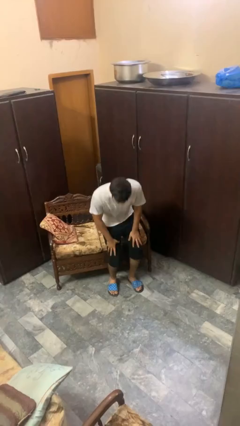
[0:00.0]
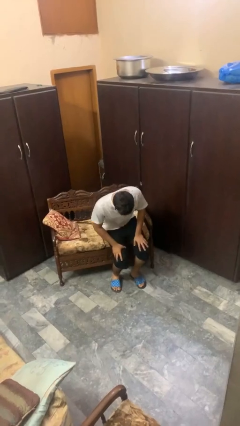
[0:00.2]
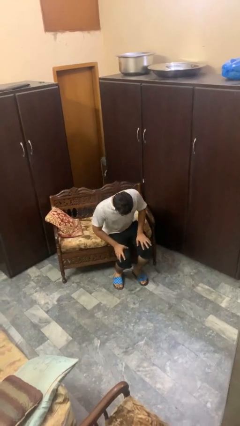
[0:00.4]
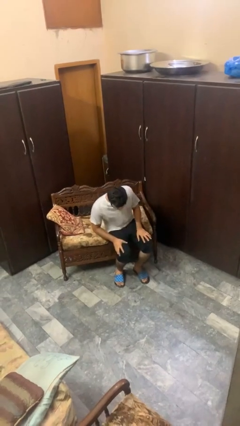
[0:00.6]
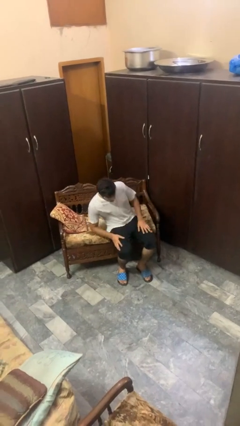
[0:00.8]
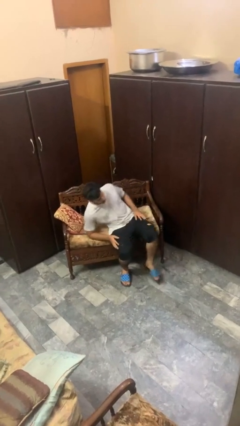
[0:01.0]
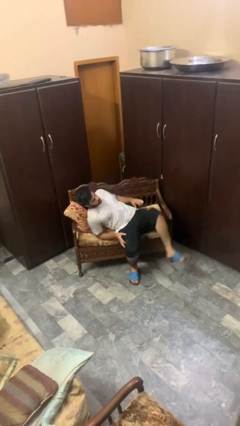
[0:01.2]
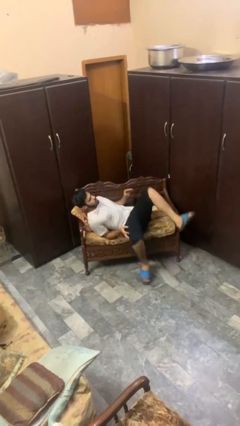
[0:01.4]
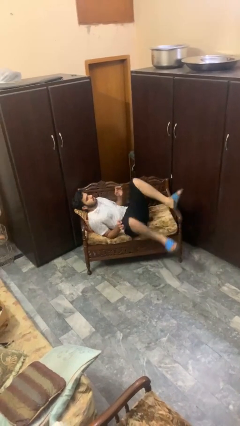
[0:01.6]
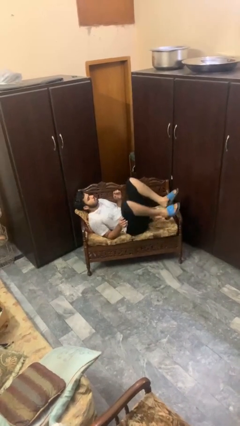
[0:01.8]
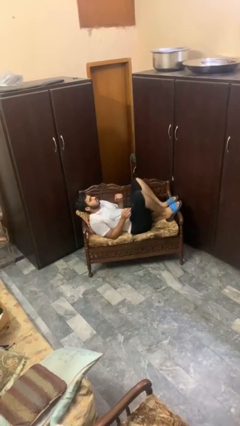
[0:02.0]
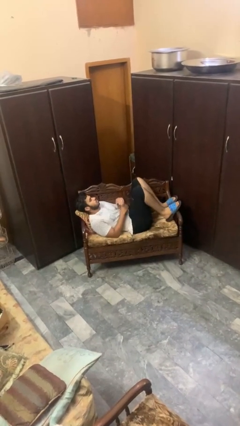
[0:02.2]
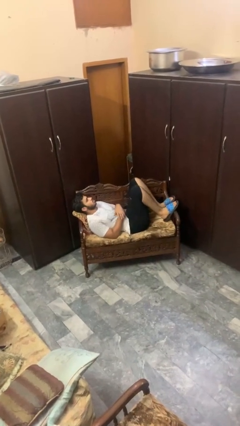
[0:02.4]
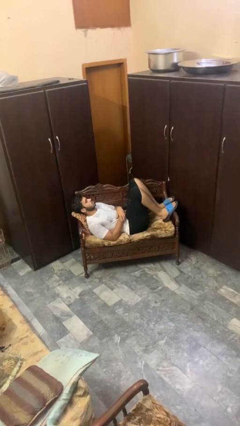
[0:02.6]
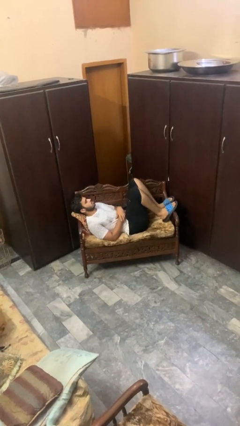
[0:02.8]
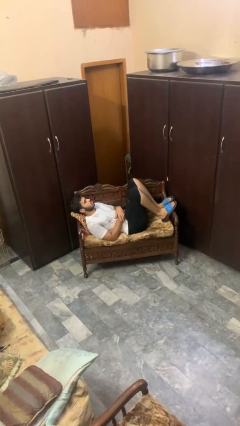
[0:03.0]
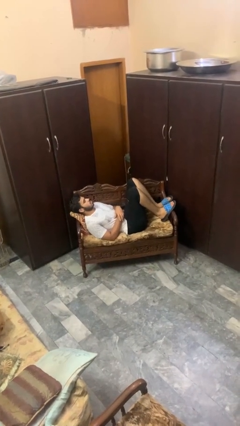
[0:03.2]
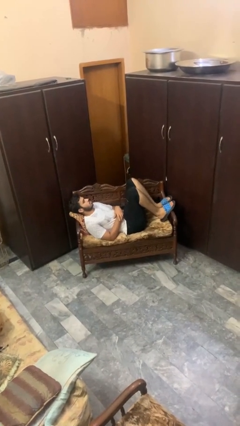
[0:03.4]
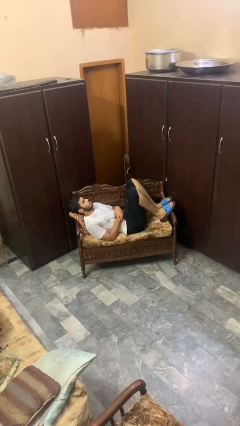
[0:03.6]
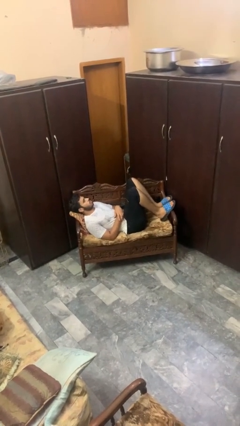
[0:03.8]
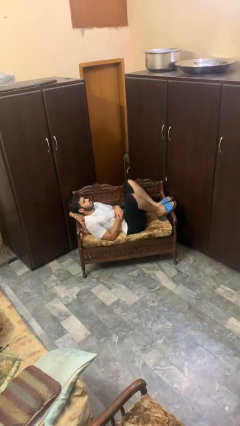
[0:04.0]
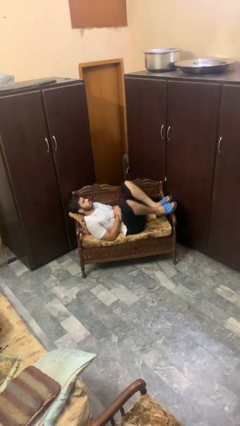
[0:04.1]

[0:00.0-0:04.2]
person lies down on couch

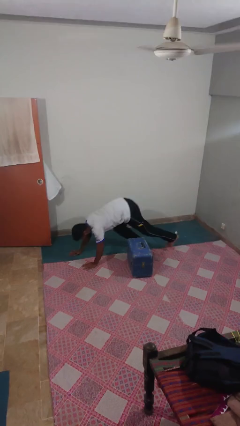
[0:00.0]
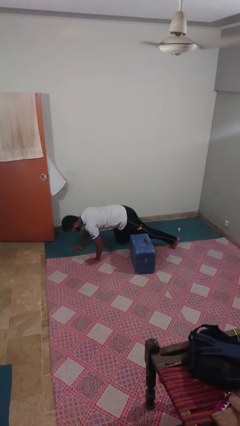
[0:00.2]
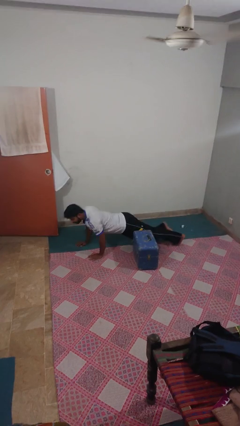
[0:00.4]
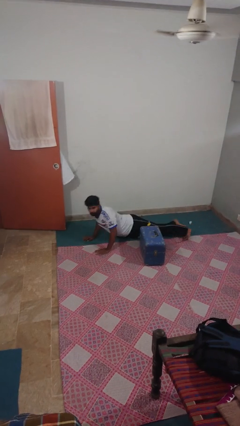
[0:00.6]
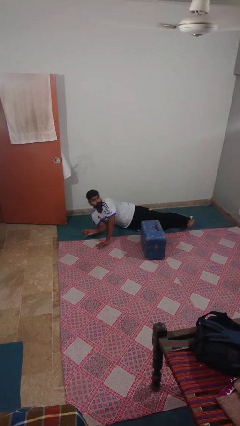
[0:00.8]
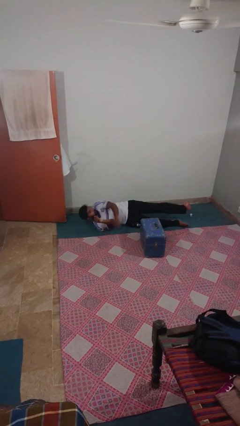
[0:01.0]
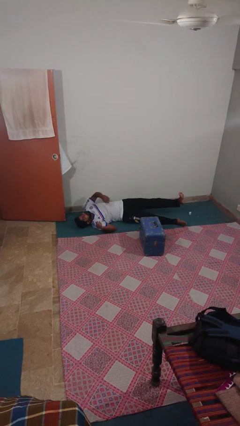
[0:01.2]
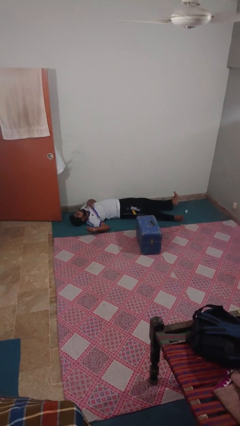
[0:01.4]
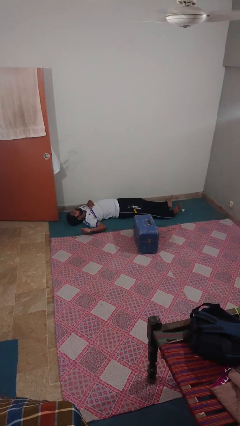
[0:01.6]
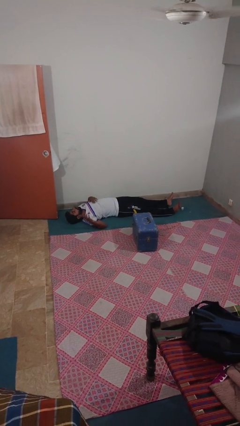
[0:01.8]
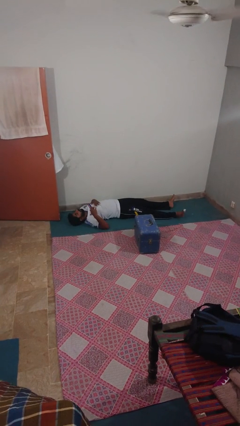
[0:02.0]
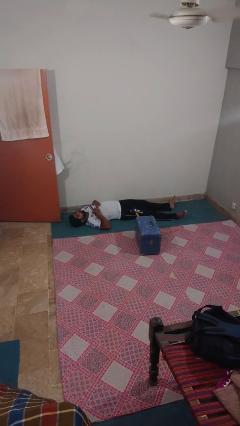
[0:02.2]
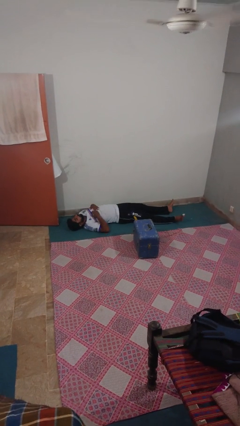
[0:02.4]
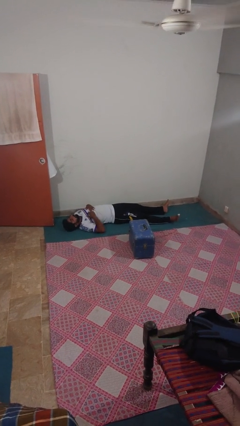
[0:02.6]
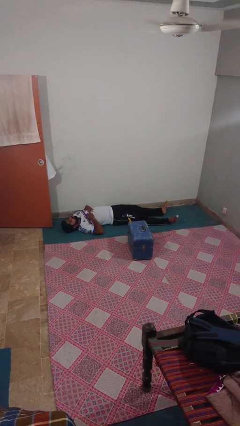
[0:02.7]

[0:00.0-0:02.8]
person lies down on floor

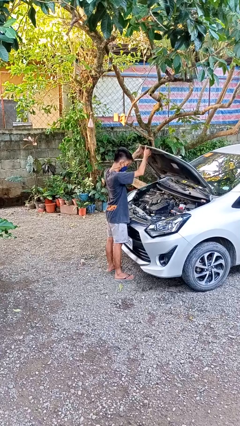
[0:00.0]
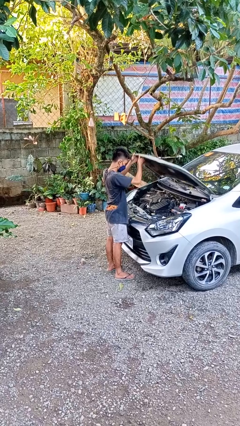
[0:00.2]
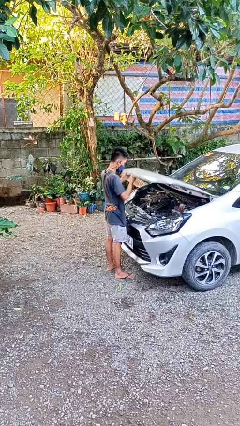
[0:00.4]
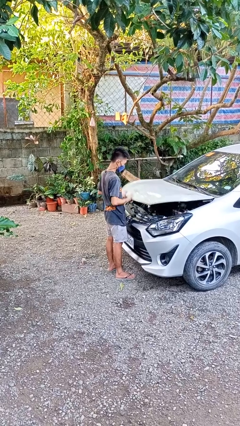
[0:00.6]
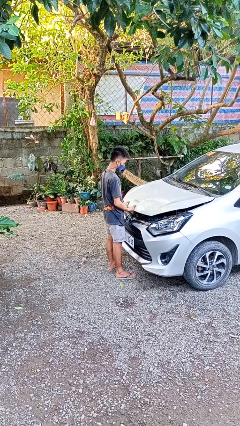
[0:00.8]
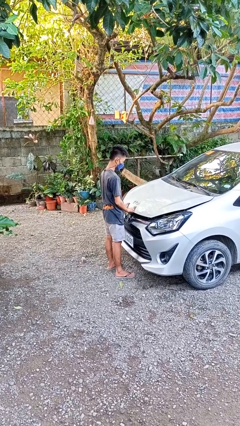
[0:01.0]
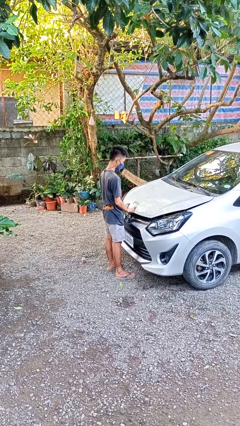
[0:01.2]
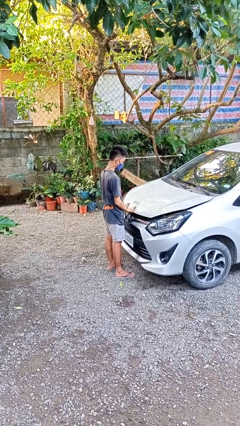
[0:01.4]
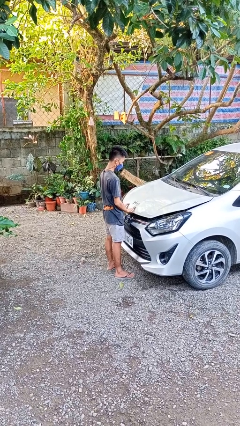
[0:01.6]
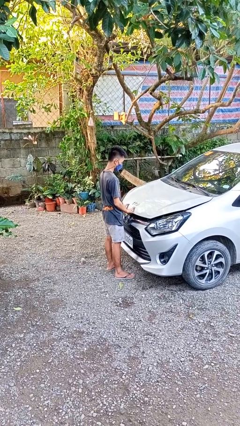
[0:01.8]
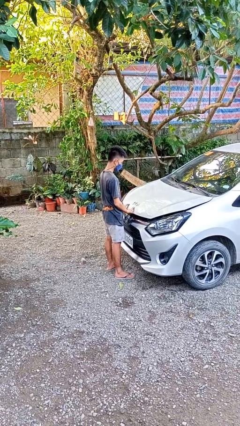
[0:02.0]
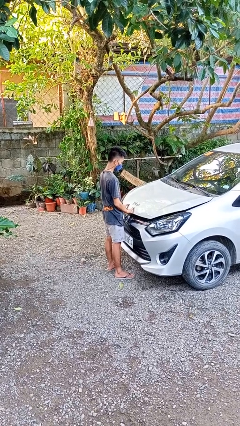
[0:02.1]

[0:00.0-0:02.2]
person closes car hood

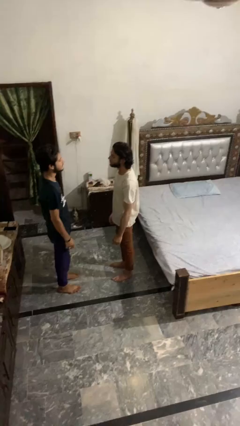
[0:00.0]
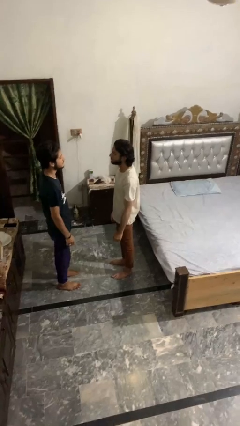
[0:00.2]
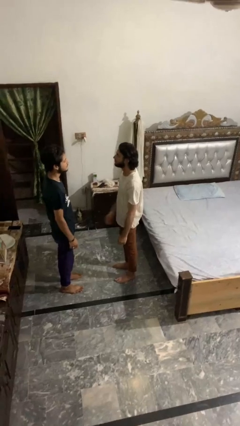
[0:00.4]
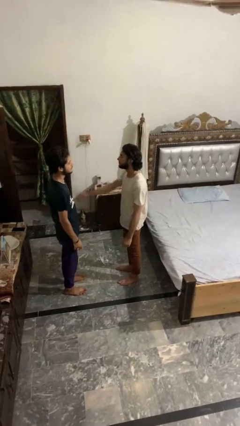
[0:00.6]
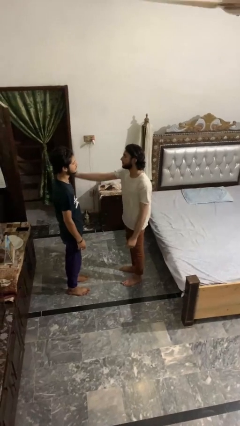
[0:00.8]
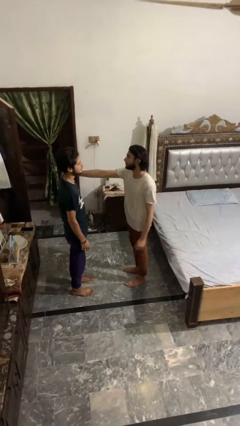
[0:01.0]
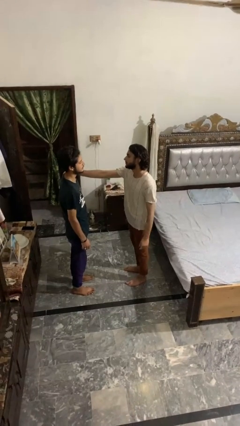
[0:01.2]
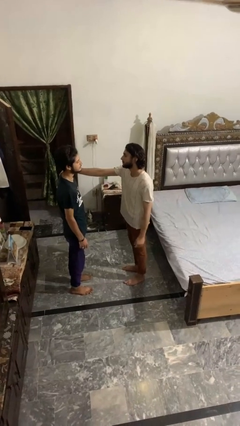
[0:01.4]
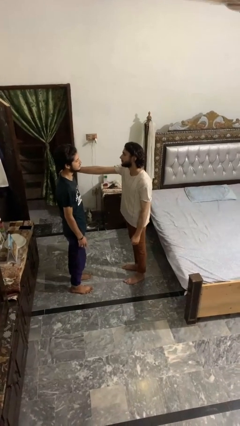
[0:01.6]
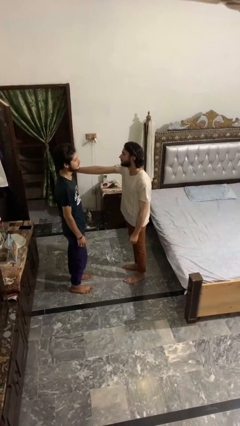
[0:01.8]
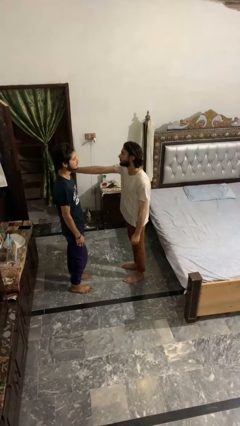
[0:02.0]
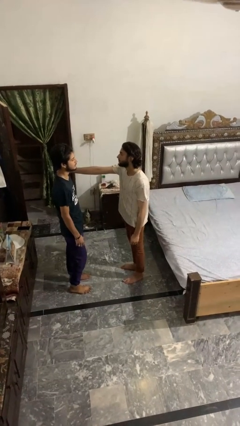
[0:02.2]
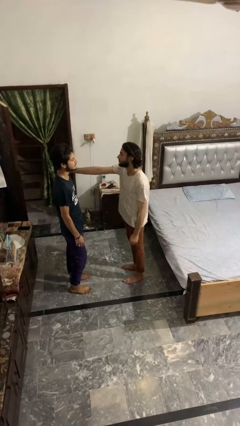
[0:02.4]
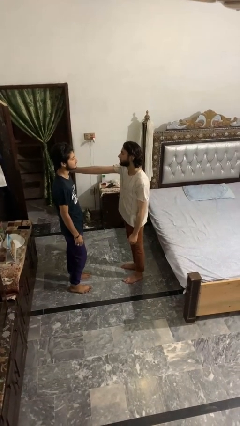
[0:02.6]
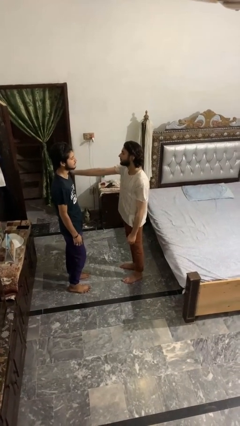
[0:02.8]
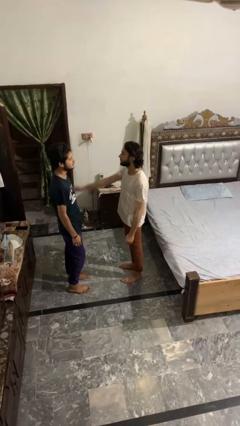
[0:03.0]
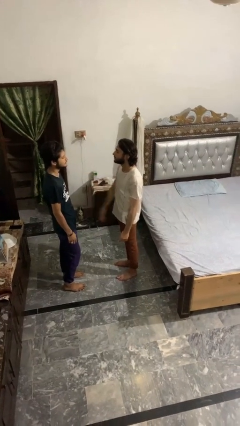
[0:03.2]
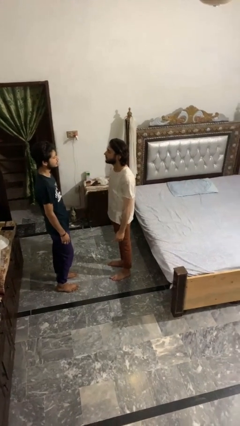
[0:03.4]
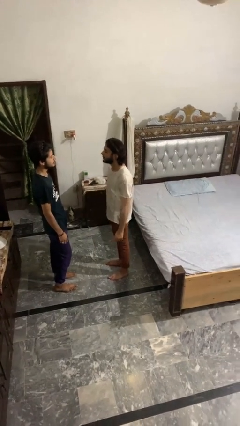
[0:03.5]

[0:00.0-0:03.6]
person pounds shoulders of person

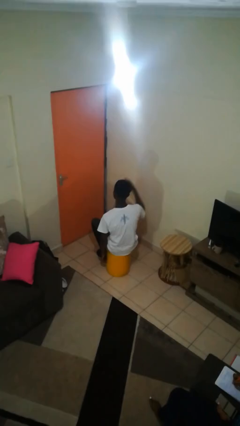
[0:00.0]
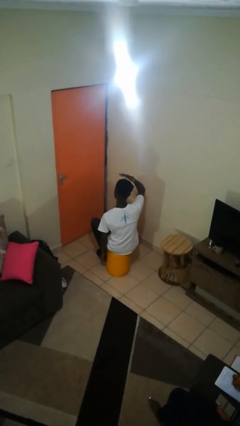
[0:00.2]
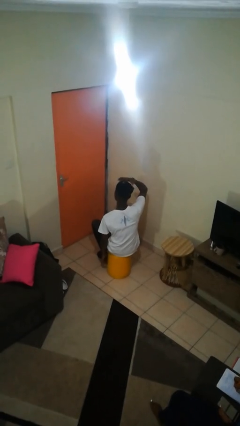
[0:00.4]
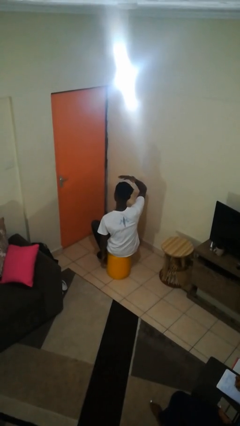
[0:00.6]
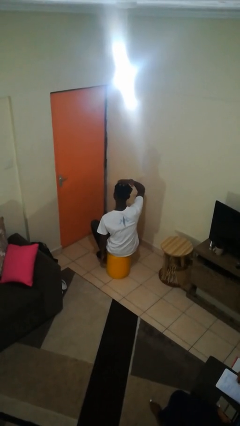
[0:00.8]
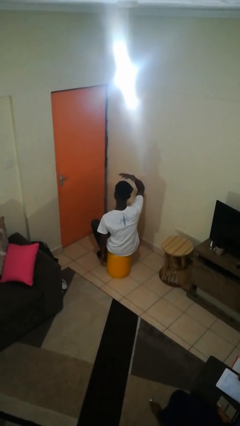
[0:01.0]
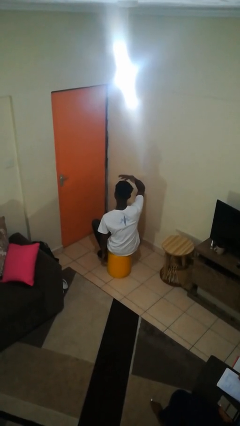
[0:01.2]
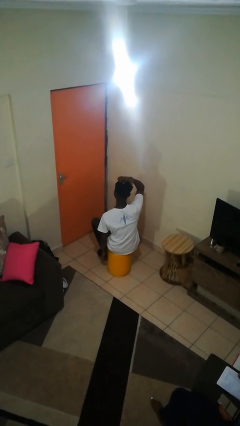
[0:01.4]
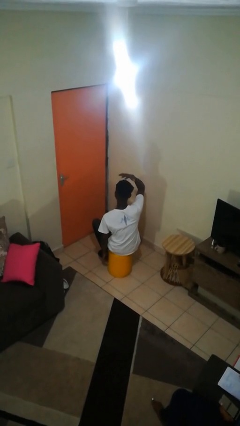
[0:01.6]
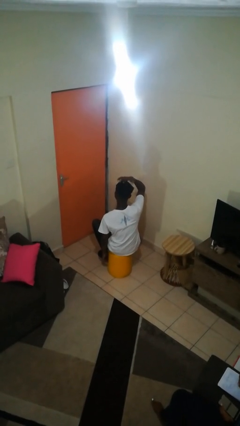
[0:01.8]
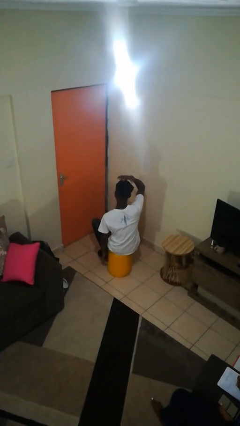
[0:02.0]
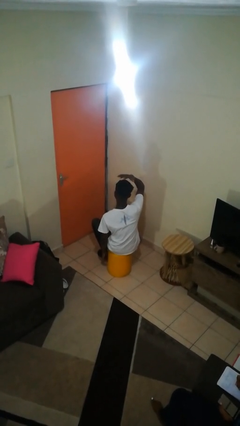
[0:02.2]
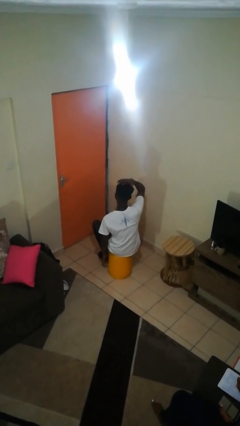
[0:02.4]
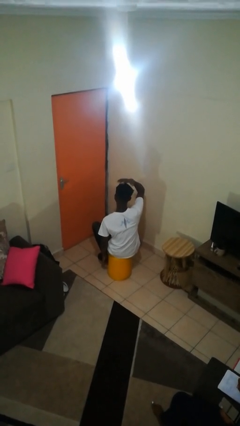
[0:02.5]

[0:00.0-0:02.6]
person pats head

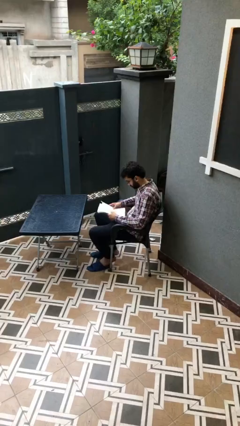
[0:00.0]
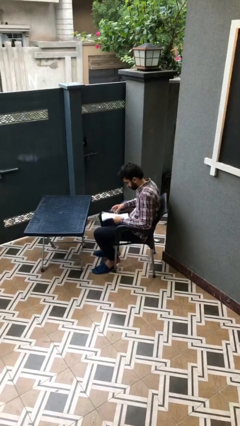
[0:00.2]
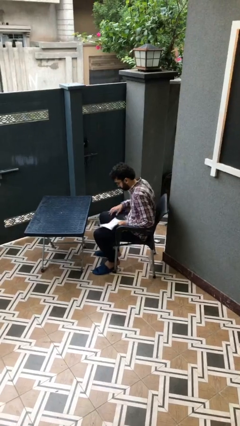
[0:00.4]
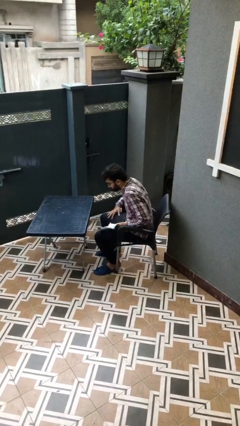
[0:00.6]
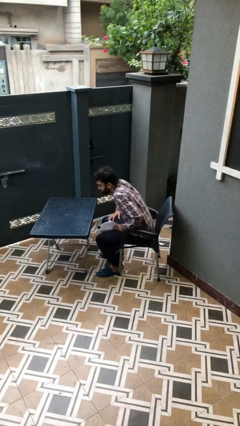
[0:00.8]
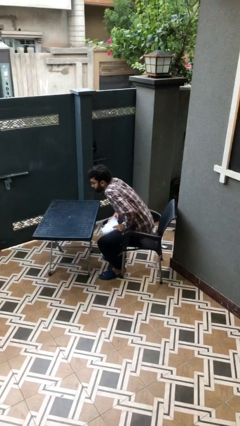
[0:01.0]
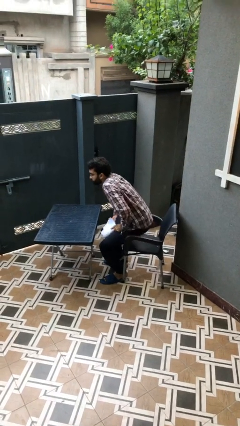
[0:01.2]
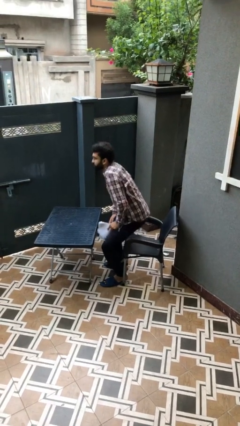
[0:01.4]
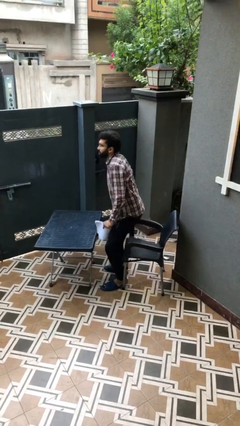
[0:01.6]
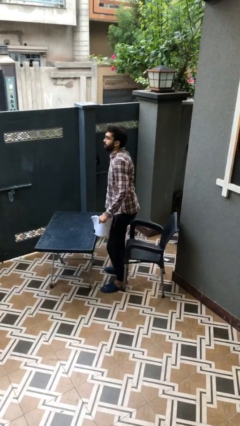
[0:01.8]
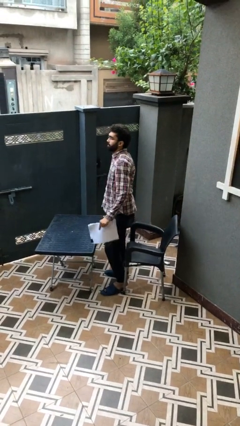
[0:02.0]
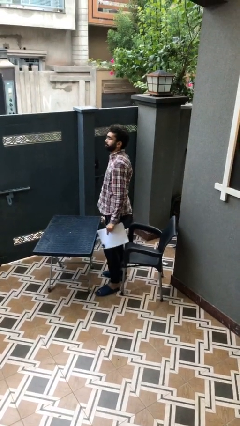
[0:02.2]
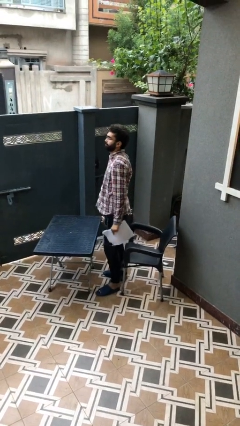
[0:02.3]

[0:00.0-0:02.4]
person stands up
